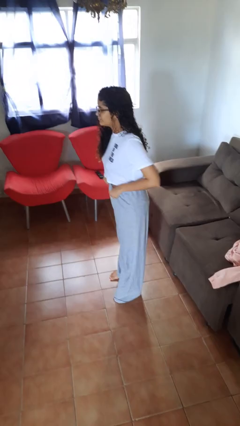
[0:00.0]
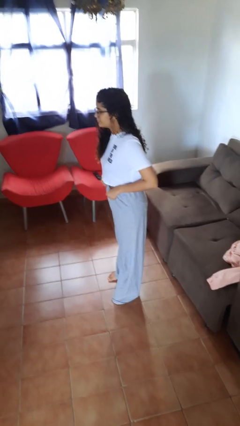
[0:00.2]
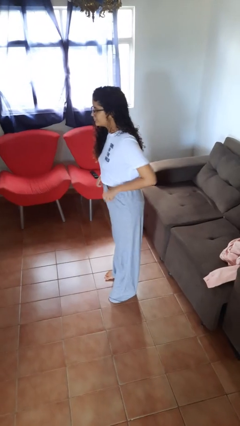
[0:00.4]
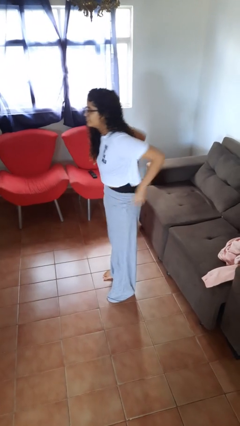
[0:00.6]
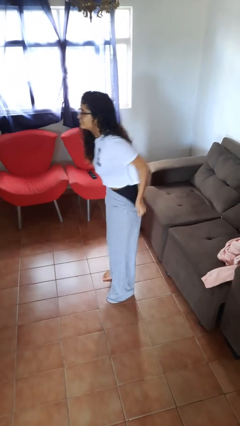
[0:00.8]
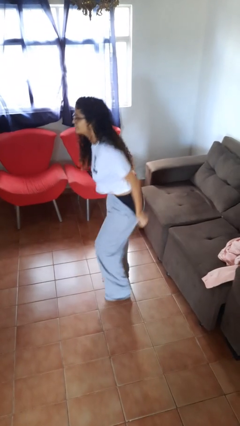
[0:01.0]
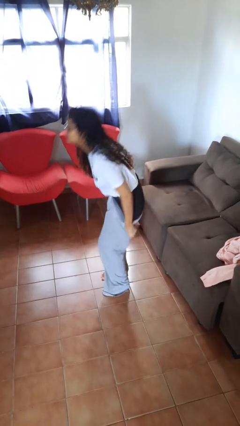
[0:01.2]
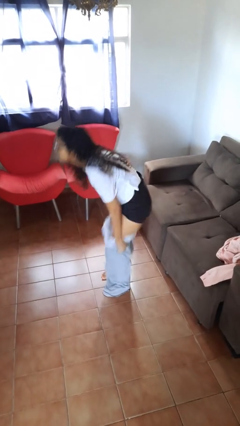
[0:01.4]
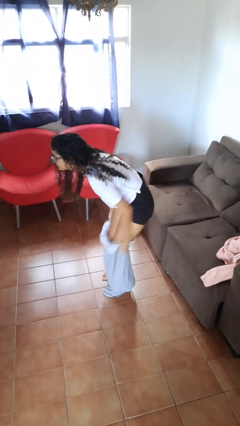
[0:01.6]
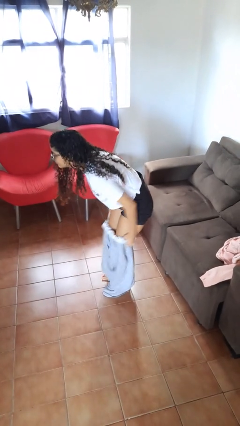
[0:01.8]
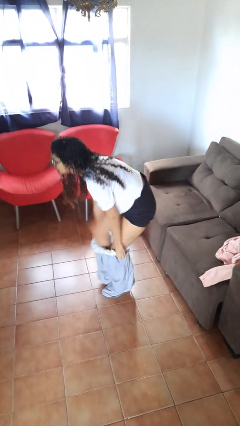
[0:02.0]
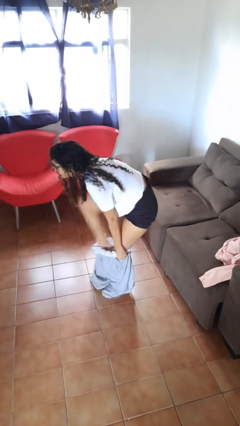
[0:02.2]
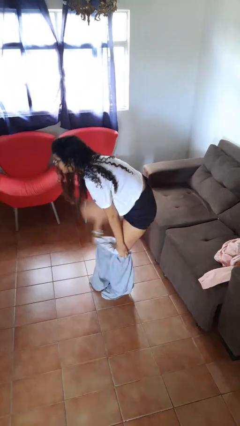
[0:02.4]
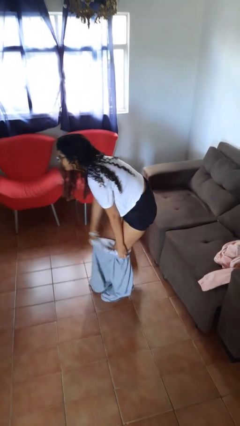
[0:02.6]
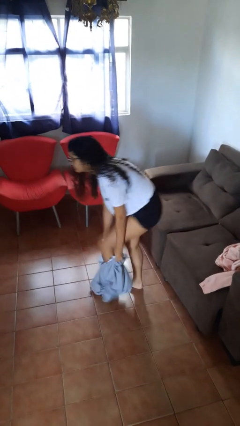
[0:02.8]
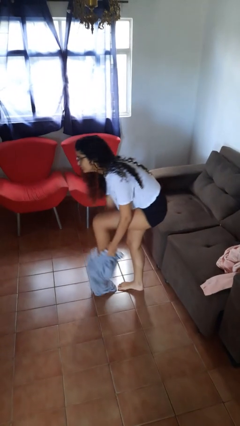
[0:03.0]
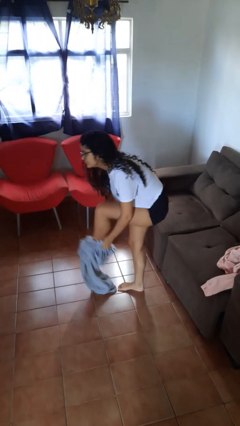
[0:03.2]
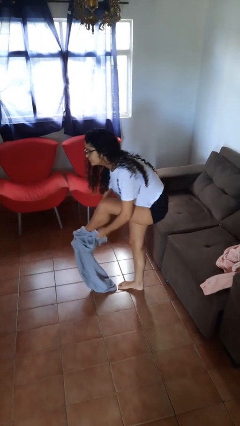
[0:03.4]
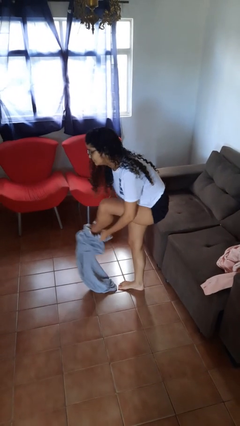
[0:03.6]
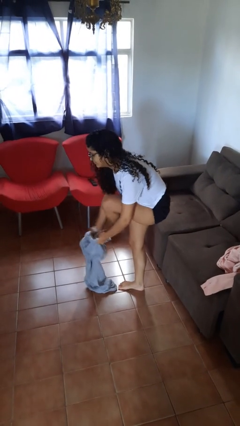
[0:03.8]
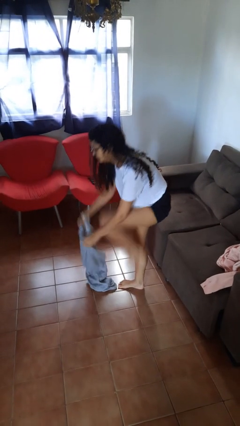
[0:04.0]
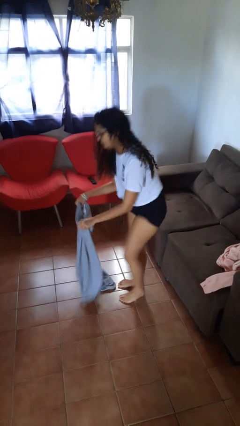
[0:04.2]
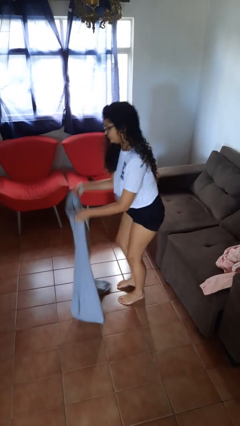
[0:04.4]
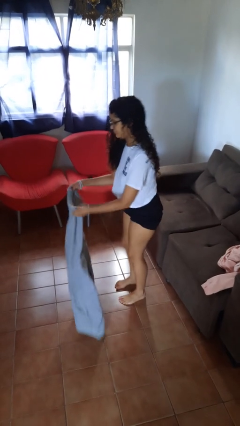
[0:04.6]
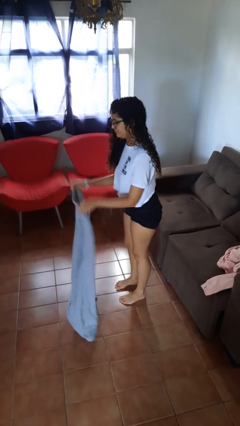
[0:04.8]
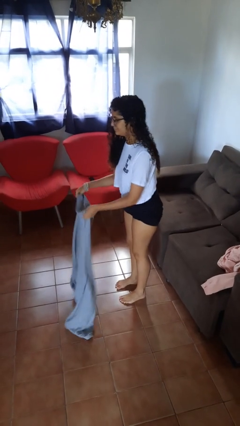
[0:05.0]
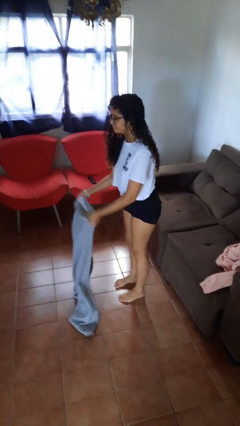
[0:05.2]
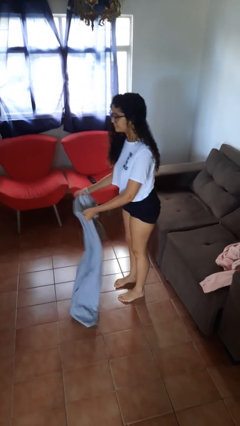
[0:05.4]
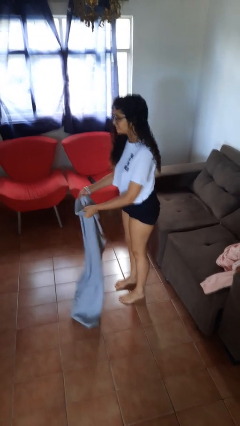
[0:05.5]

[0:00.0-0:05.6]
person takes off pants

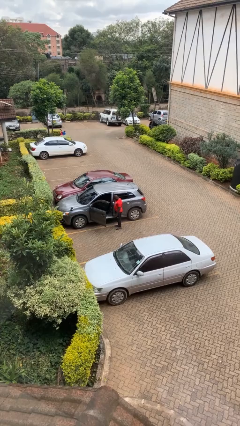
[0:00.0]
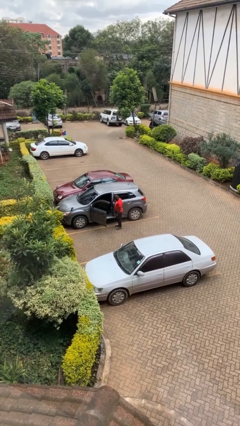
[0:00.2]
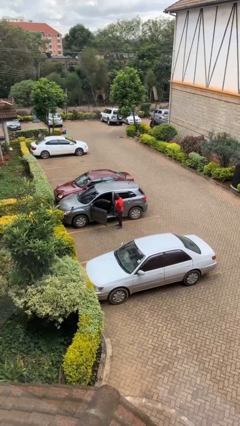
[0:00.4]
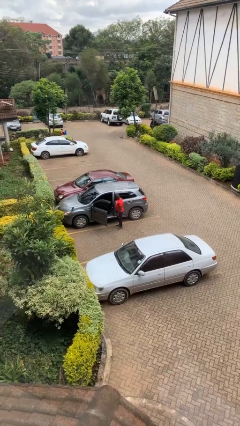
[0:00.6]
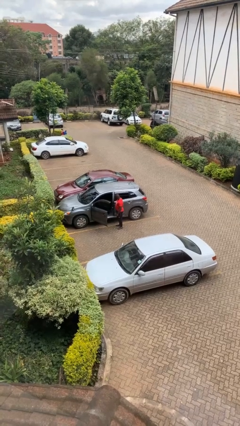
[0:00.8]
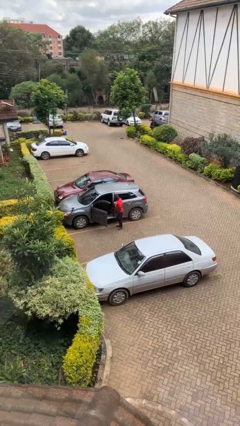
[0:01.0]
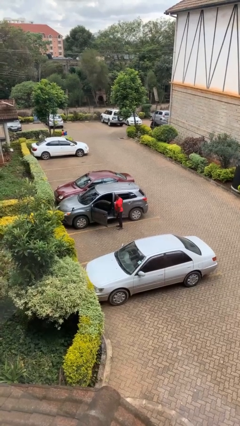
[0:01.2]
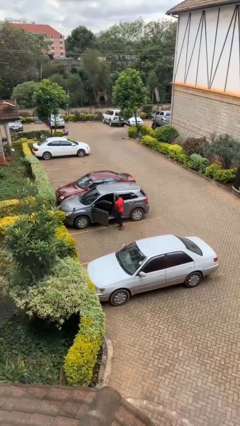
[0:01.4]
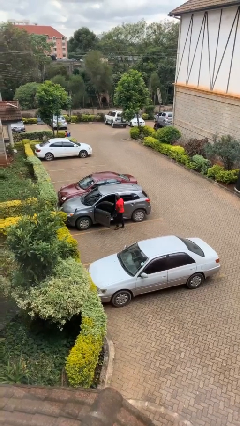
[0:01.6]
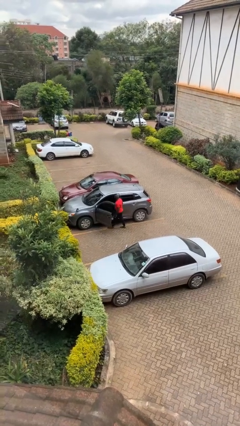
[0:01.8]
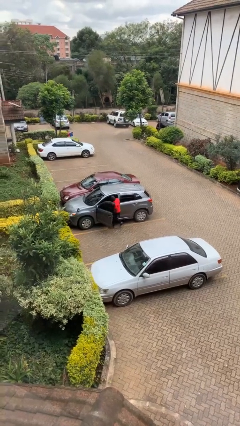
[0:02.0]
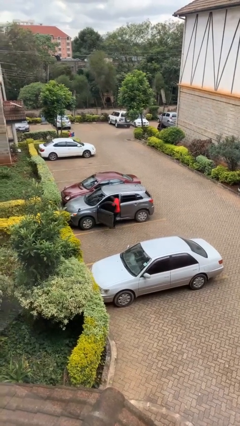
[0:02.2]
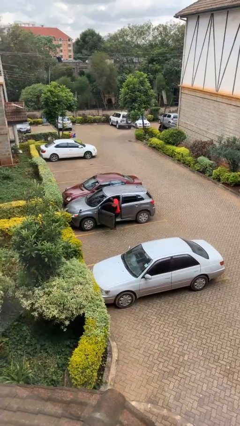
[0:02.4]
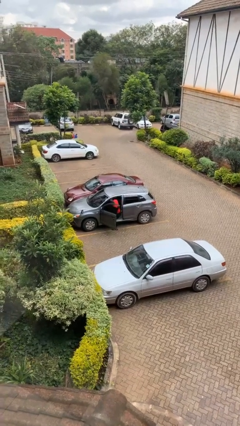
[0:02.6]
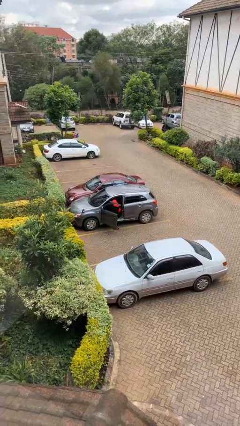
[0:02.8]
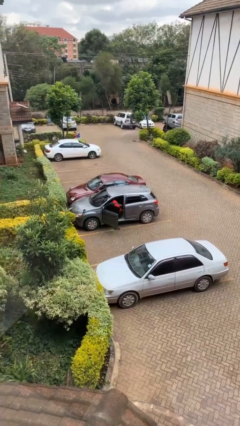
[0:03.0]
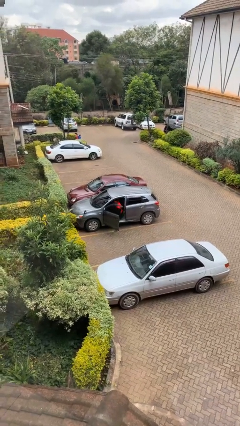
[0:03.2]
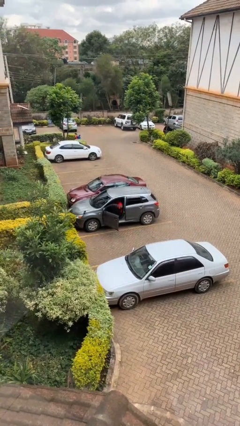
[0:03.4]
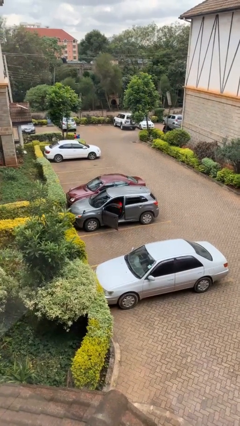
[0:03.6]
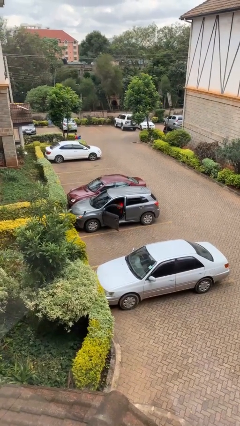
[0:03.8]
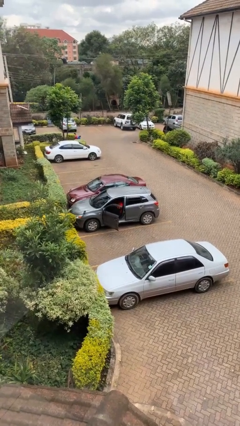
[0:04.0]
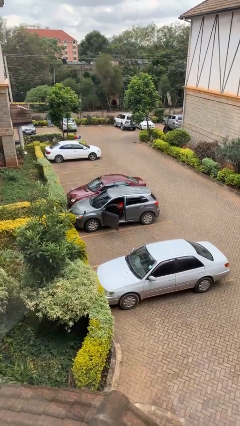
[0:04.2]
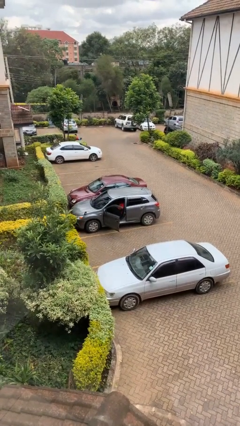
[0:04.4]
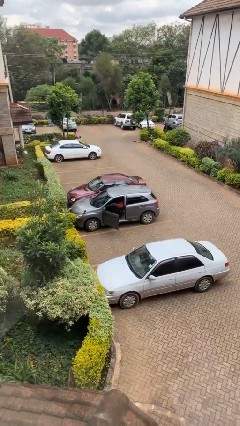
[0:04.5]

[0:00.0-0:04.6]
person enters car

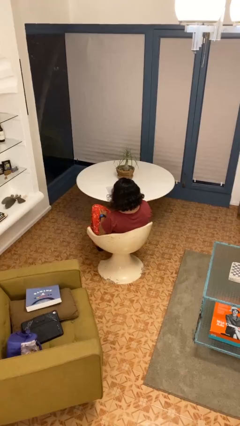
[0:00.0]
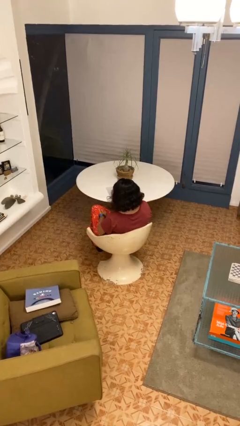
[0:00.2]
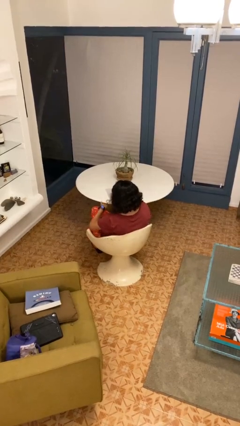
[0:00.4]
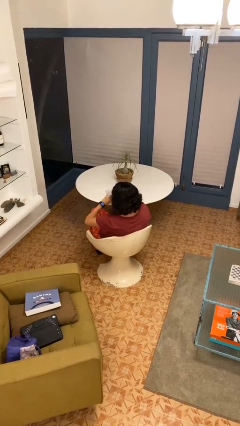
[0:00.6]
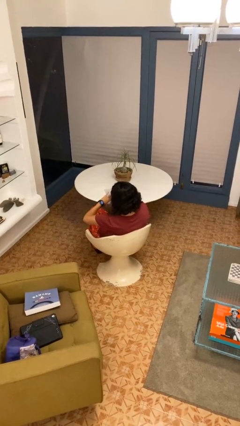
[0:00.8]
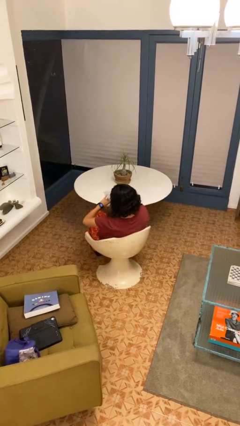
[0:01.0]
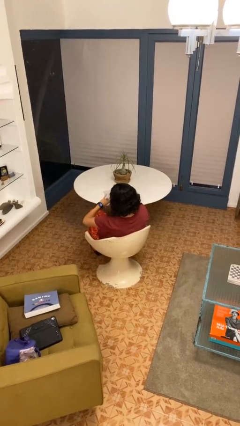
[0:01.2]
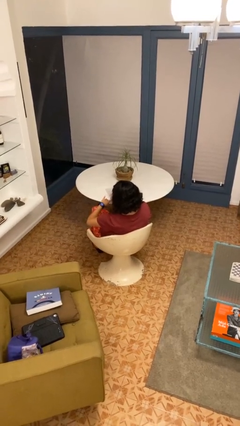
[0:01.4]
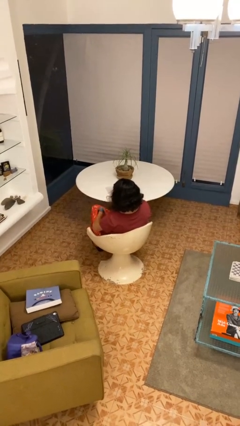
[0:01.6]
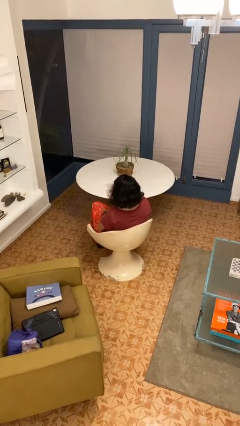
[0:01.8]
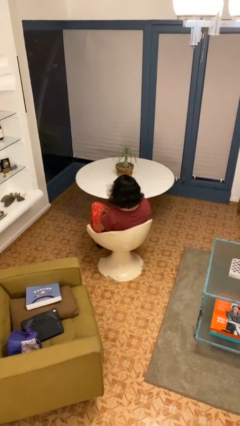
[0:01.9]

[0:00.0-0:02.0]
person looks at wristwatch

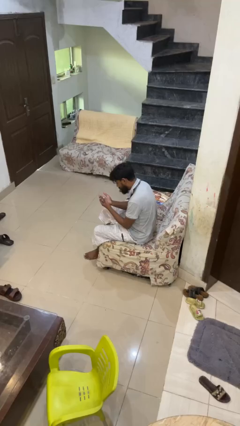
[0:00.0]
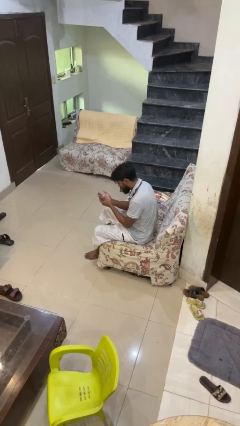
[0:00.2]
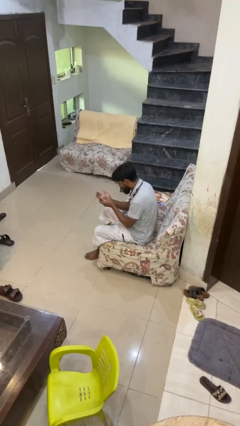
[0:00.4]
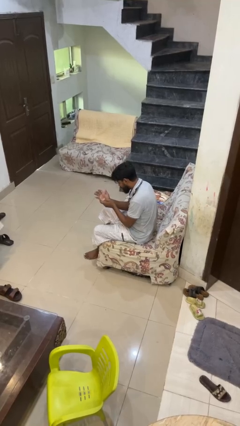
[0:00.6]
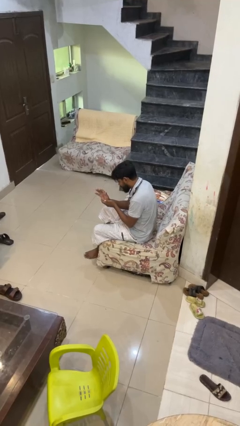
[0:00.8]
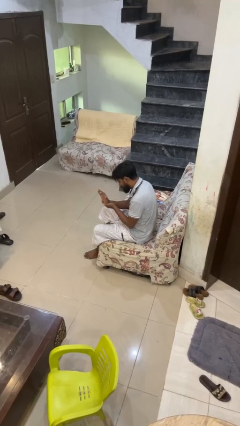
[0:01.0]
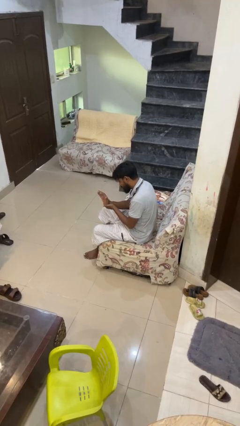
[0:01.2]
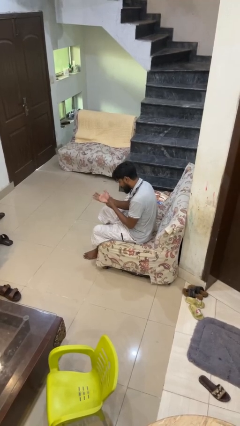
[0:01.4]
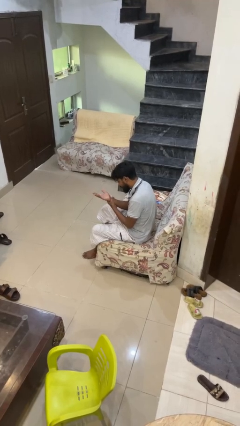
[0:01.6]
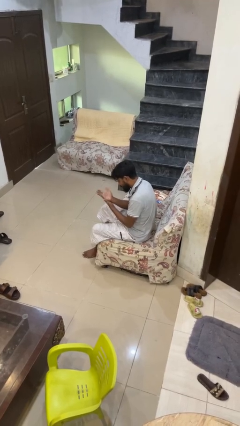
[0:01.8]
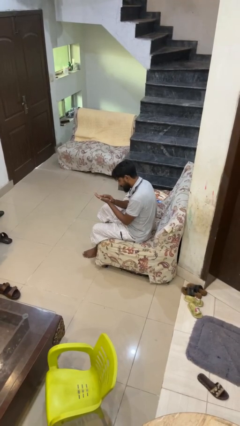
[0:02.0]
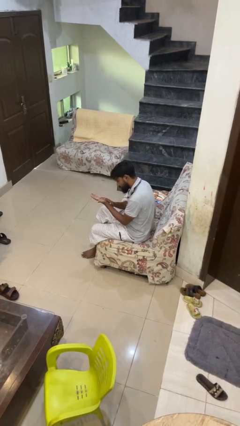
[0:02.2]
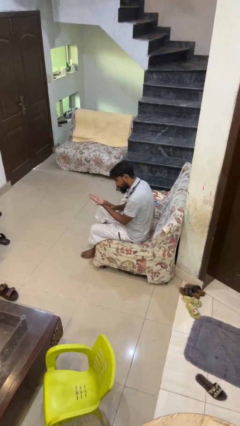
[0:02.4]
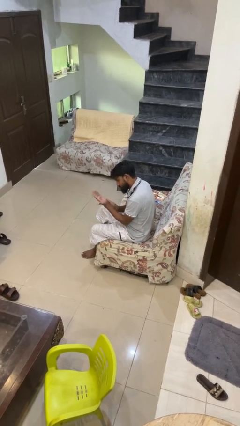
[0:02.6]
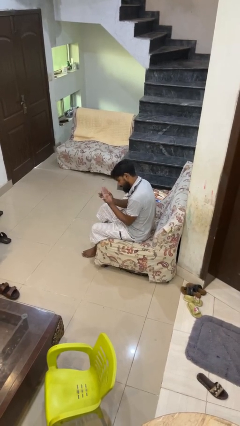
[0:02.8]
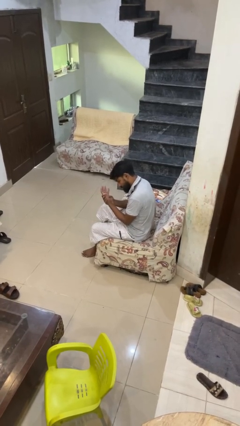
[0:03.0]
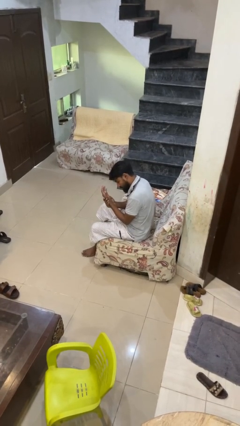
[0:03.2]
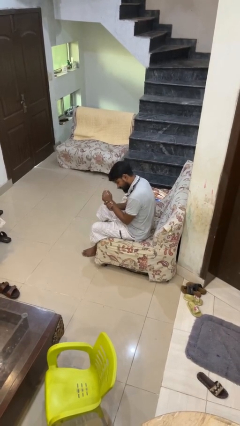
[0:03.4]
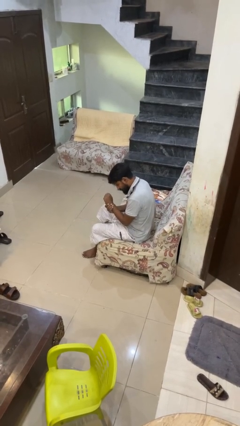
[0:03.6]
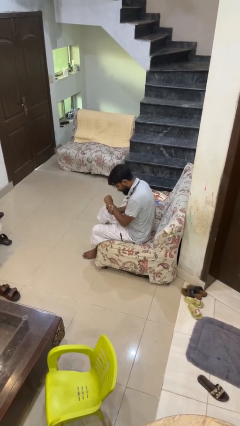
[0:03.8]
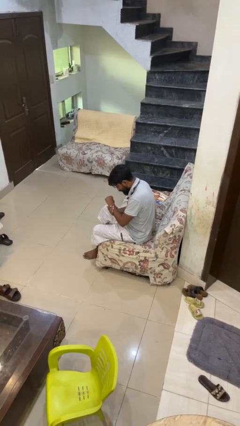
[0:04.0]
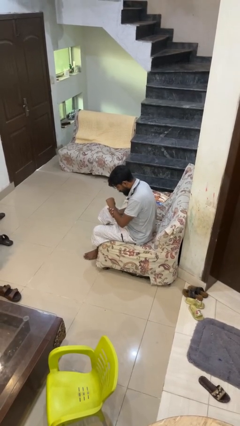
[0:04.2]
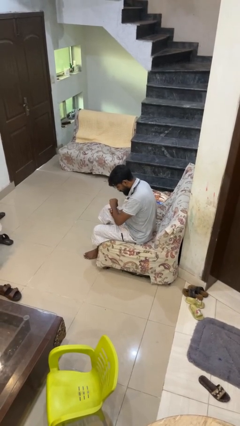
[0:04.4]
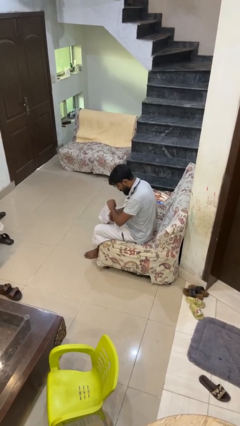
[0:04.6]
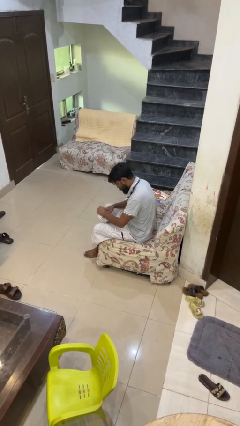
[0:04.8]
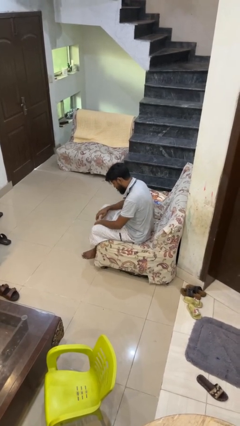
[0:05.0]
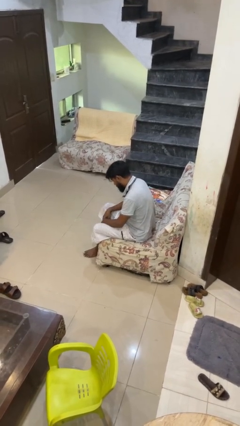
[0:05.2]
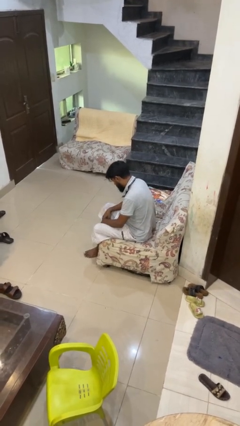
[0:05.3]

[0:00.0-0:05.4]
person looks at hands in lap
